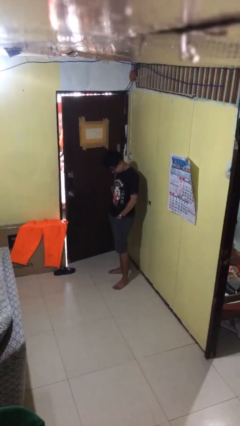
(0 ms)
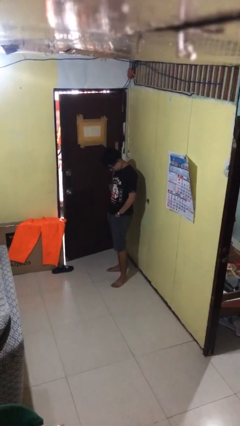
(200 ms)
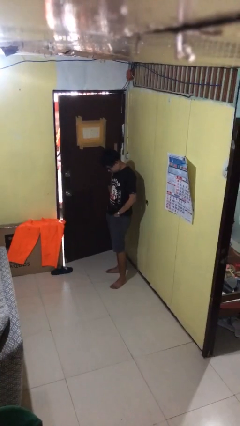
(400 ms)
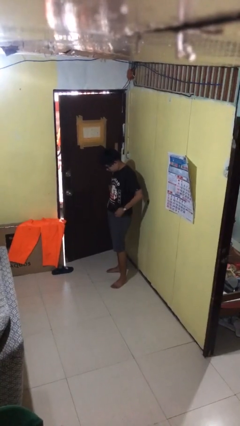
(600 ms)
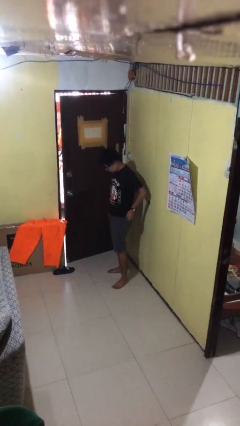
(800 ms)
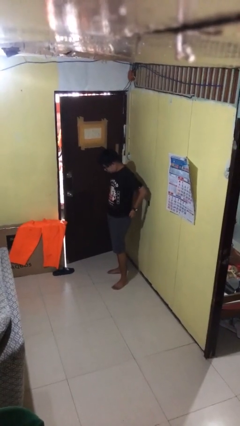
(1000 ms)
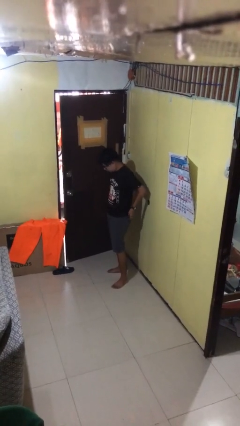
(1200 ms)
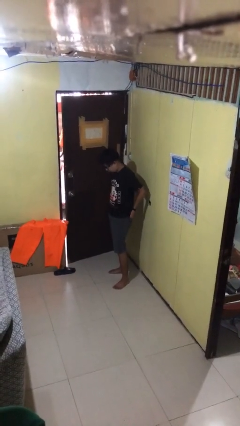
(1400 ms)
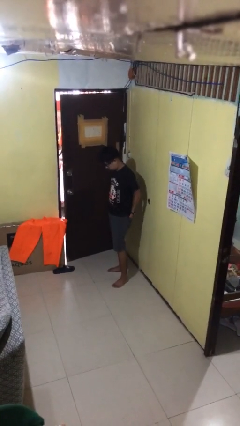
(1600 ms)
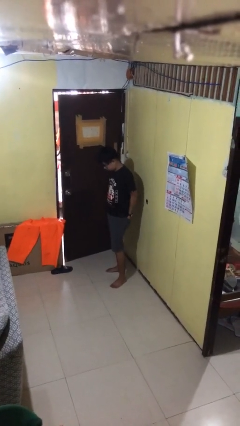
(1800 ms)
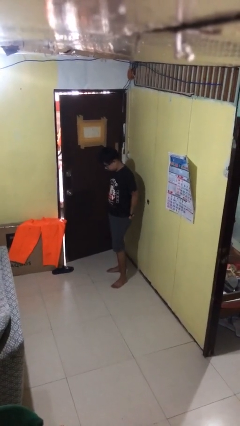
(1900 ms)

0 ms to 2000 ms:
person puts hands in back pockets

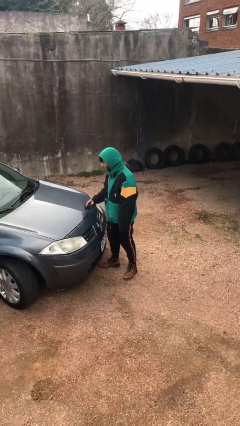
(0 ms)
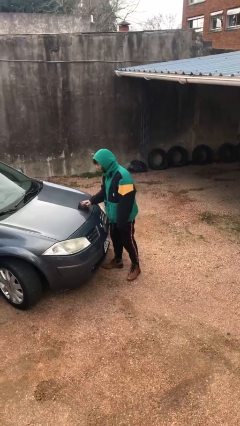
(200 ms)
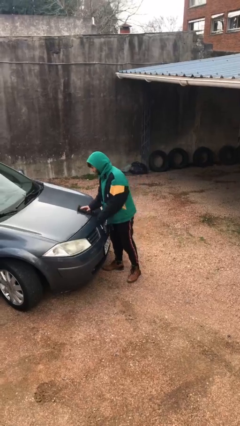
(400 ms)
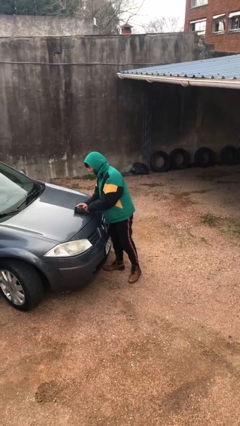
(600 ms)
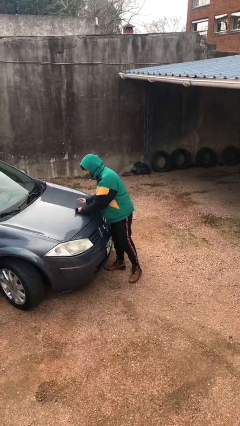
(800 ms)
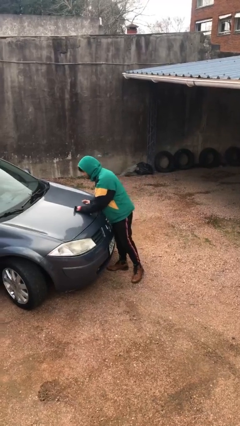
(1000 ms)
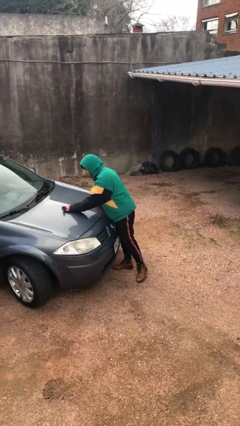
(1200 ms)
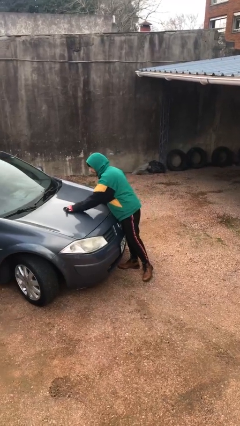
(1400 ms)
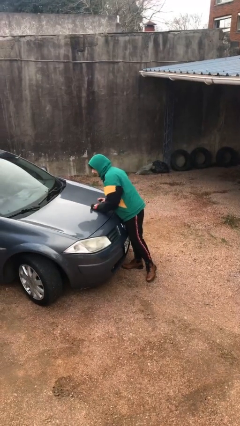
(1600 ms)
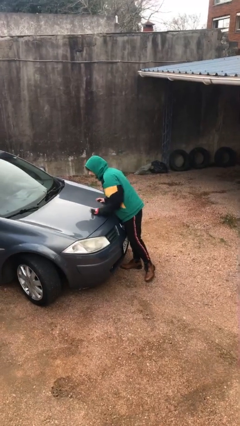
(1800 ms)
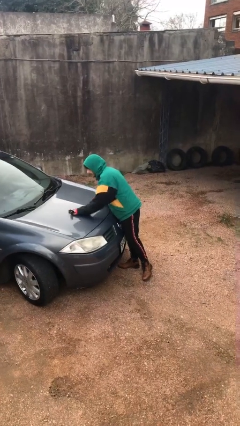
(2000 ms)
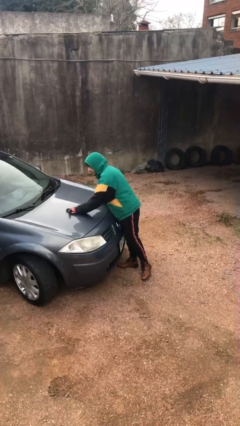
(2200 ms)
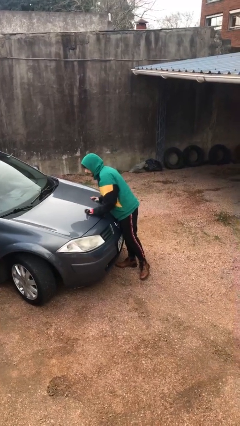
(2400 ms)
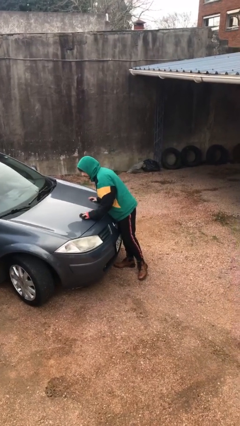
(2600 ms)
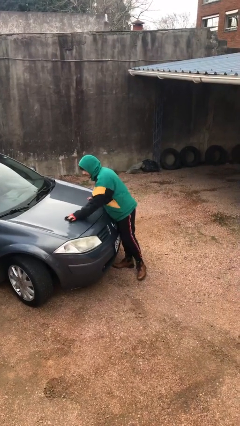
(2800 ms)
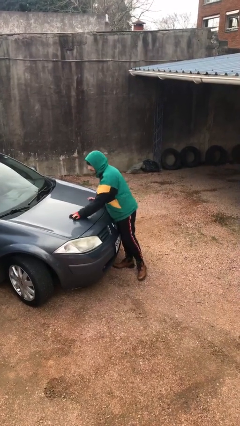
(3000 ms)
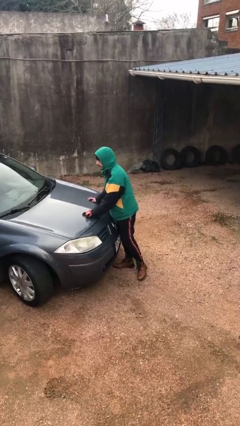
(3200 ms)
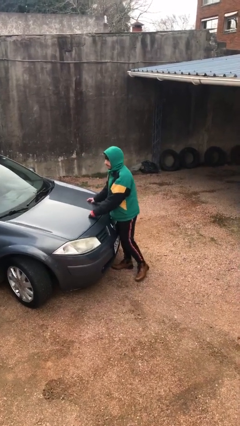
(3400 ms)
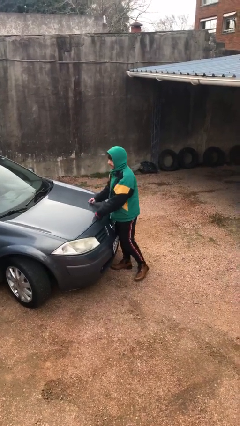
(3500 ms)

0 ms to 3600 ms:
person polishes car with rag

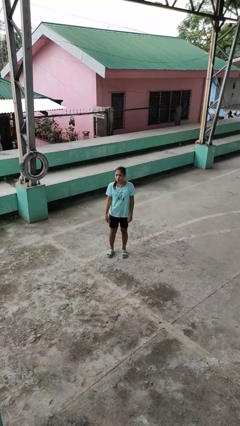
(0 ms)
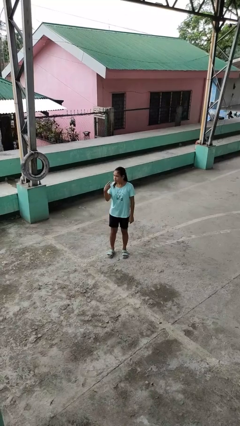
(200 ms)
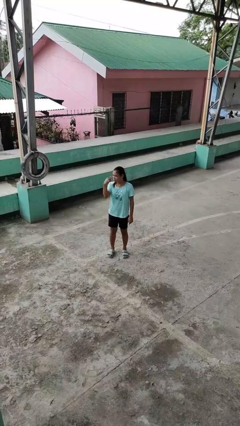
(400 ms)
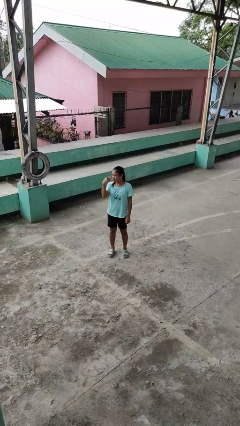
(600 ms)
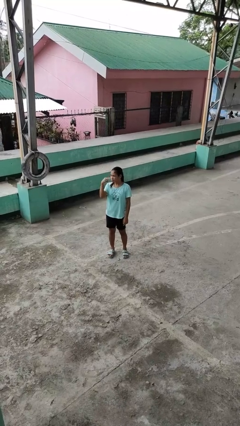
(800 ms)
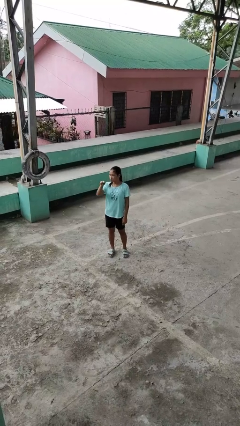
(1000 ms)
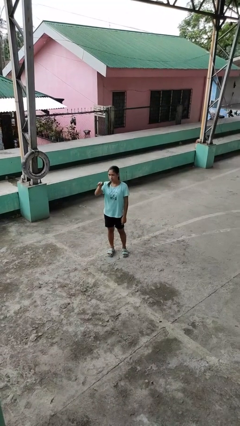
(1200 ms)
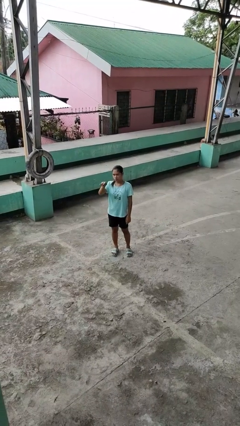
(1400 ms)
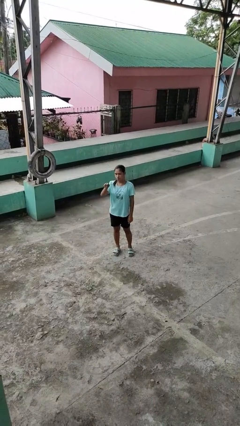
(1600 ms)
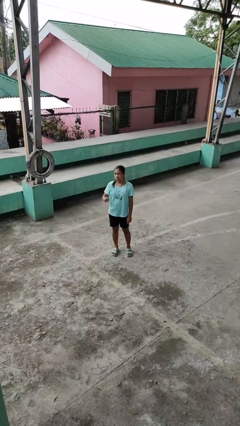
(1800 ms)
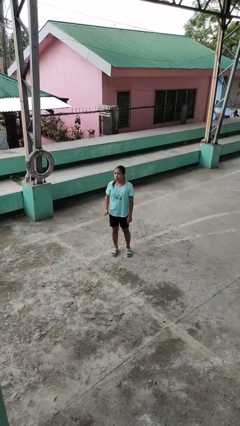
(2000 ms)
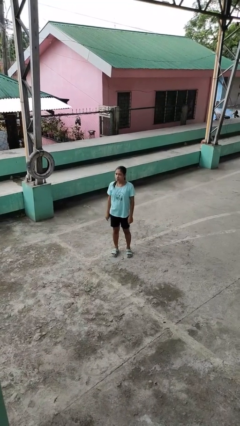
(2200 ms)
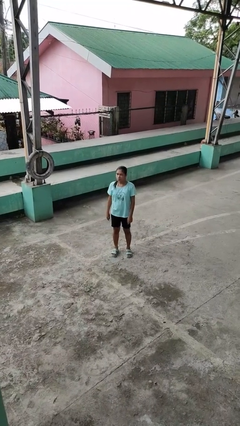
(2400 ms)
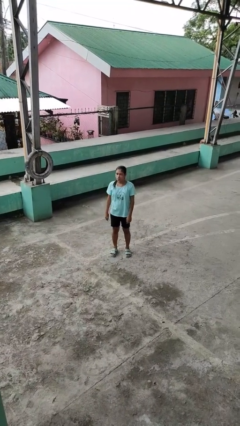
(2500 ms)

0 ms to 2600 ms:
person gestures watch closely

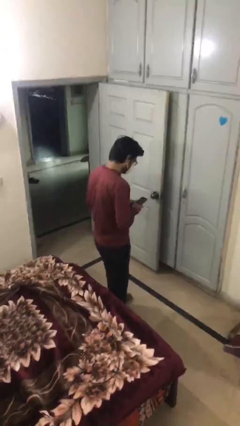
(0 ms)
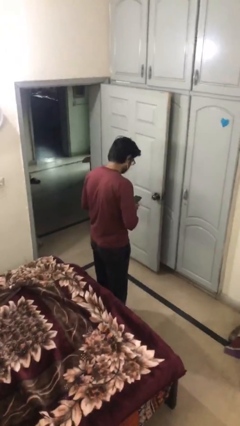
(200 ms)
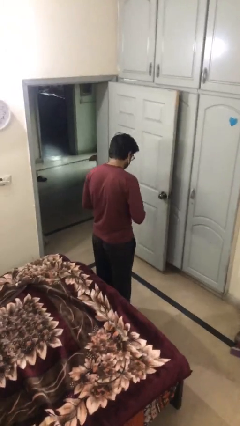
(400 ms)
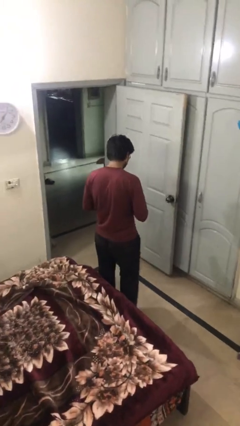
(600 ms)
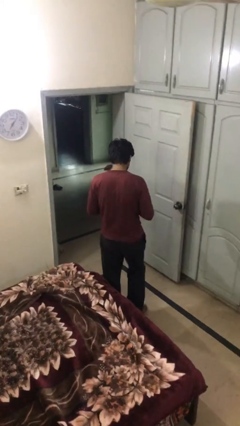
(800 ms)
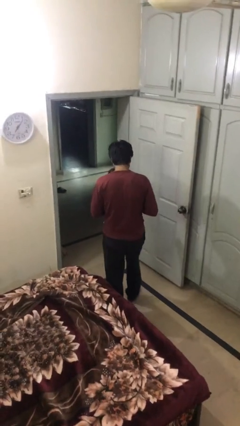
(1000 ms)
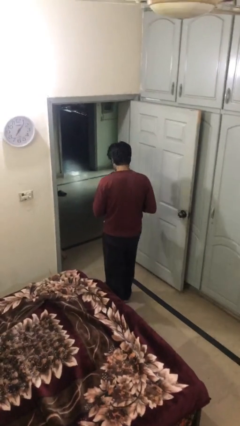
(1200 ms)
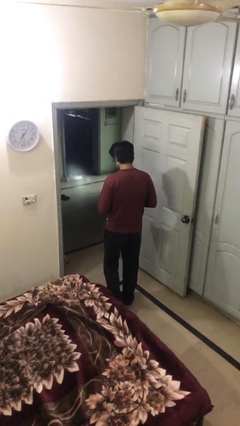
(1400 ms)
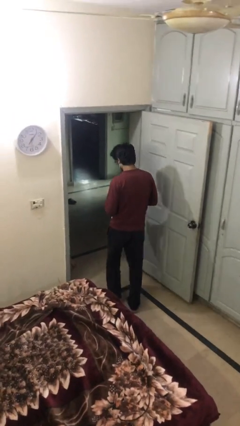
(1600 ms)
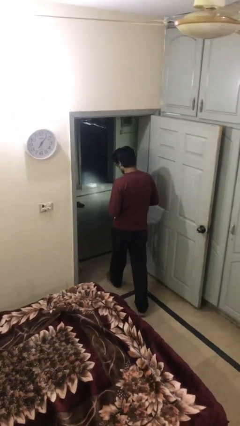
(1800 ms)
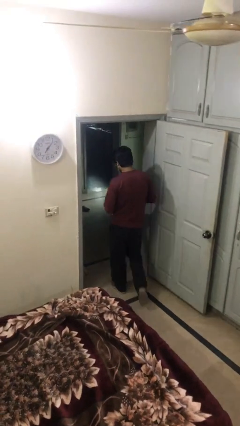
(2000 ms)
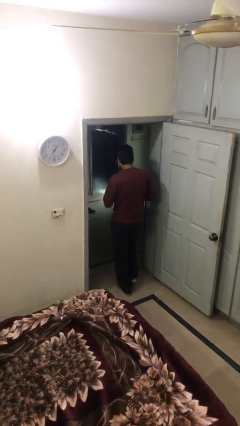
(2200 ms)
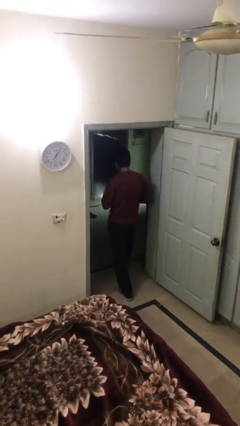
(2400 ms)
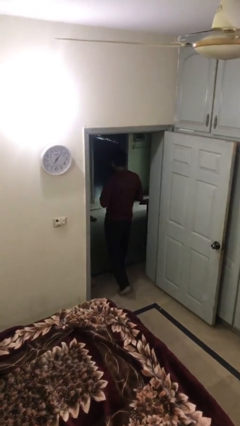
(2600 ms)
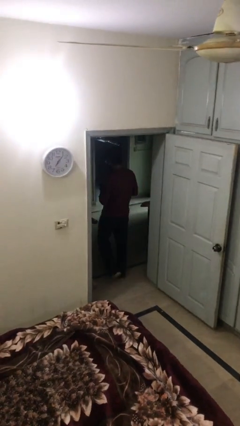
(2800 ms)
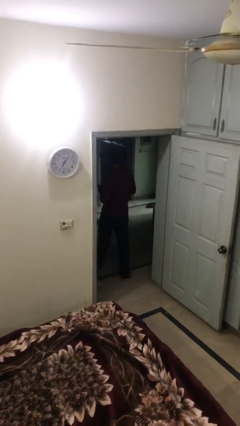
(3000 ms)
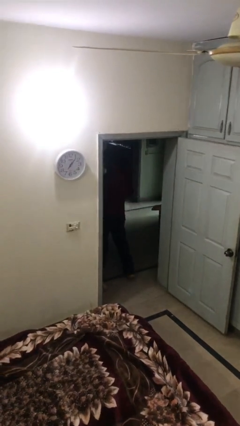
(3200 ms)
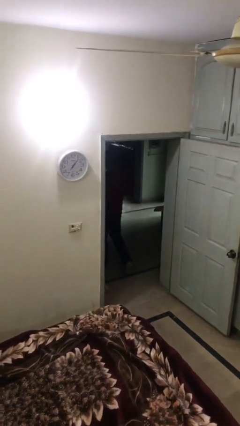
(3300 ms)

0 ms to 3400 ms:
person exits scene through structure

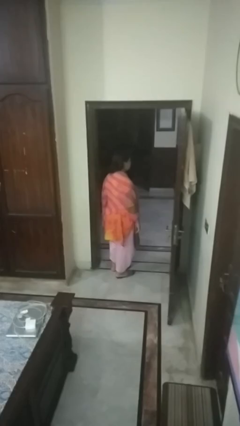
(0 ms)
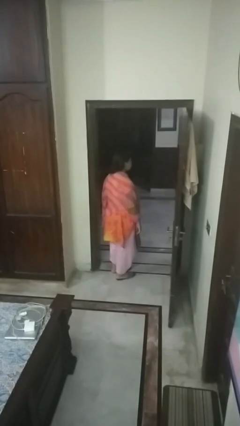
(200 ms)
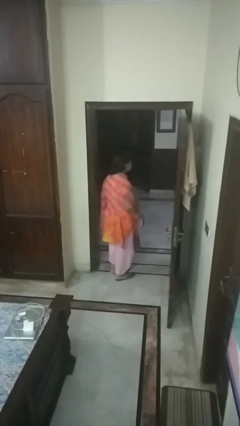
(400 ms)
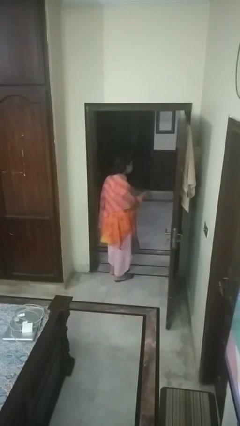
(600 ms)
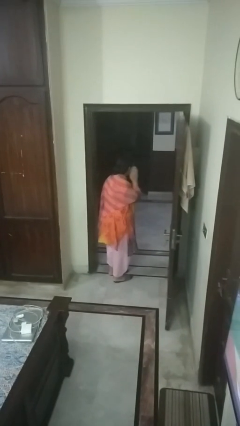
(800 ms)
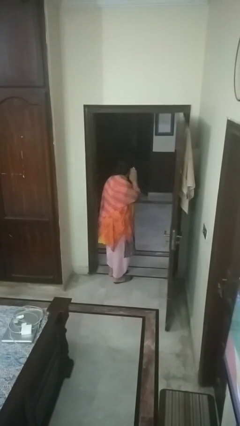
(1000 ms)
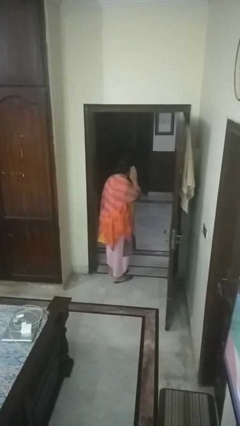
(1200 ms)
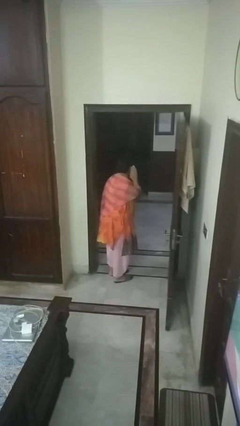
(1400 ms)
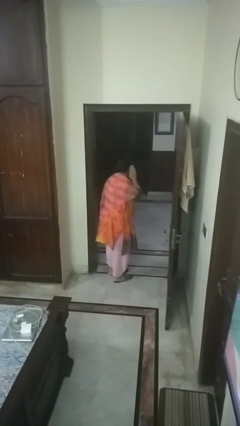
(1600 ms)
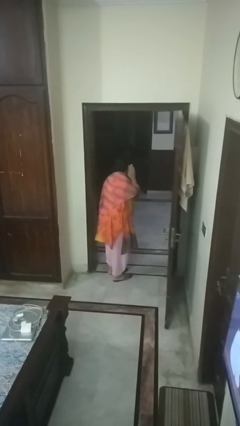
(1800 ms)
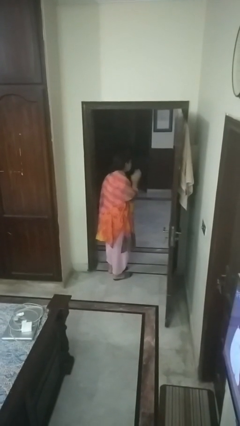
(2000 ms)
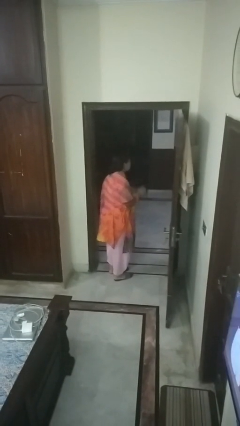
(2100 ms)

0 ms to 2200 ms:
person gestures listen closely

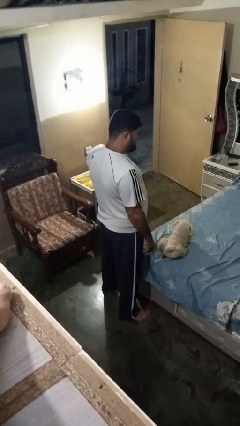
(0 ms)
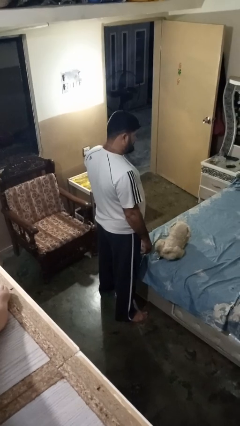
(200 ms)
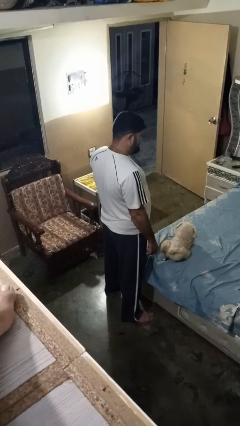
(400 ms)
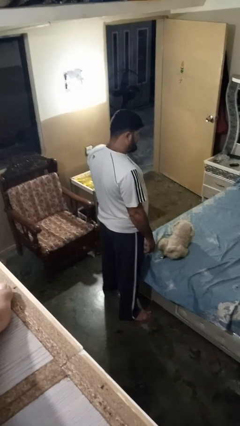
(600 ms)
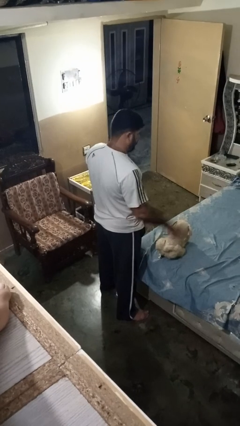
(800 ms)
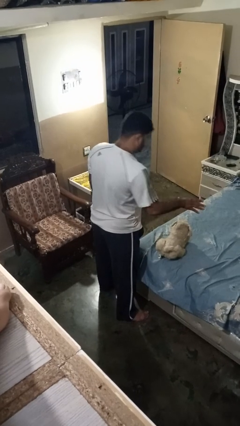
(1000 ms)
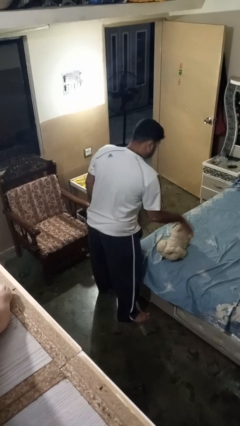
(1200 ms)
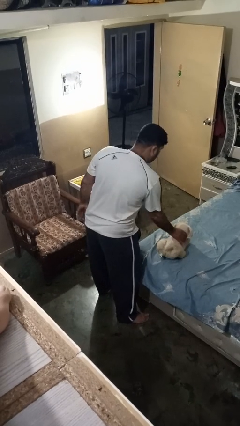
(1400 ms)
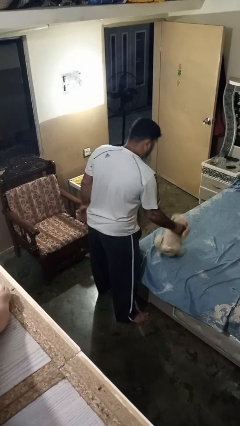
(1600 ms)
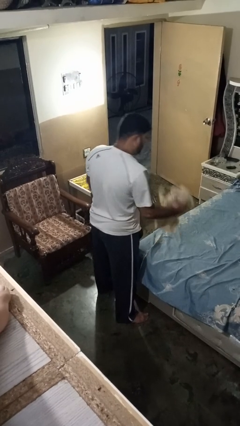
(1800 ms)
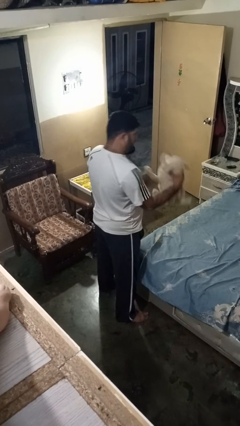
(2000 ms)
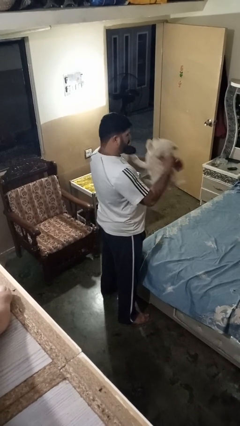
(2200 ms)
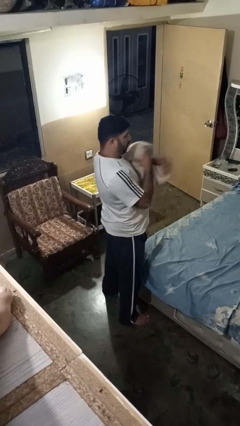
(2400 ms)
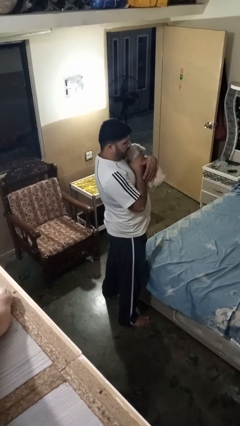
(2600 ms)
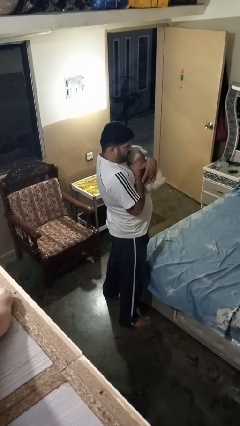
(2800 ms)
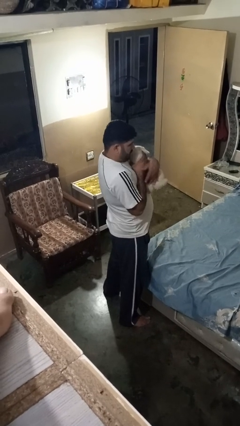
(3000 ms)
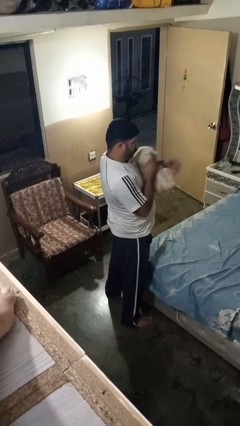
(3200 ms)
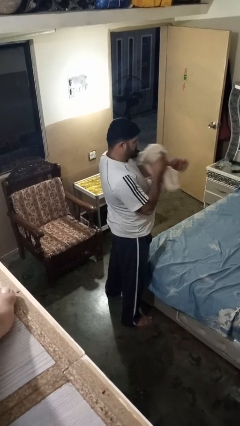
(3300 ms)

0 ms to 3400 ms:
person hugs stuffed animal

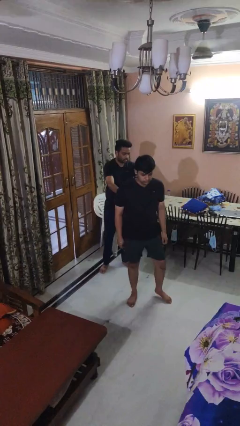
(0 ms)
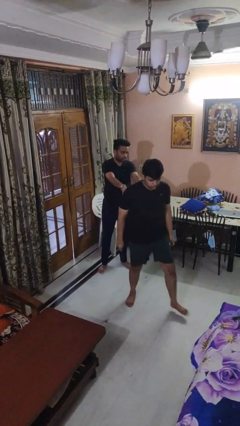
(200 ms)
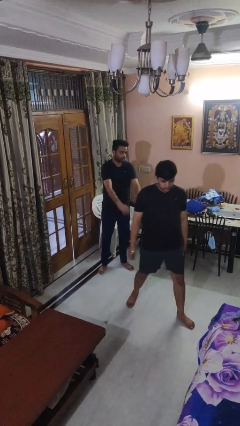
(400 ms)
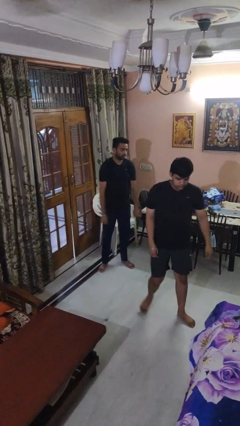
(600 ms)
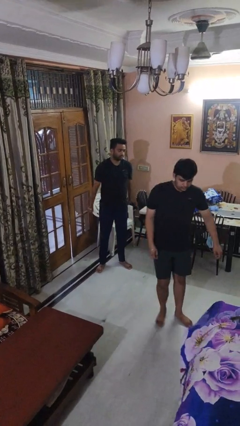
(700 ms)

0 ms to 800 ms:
person shoves person
